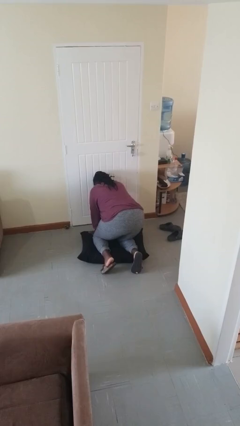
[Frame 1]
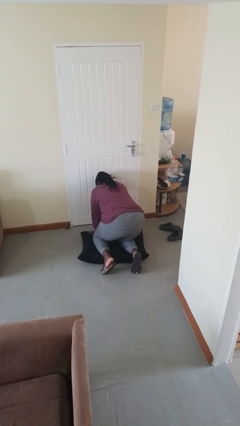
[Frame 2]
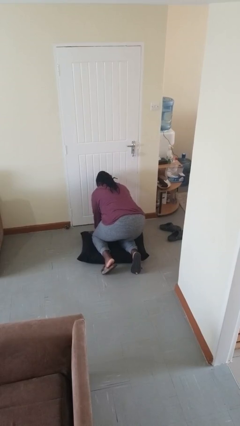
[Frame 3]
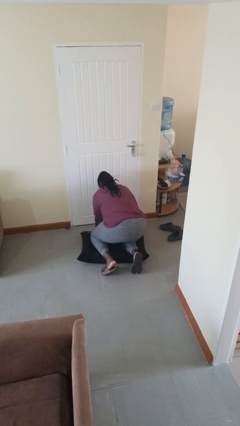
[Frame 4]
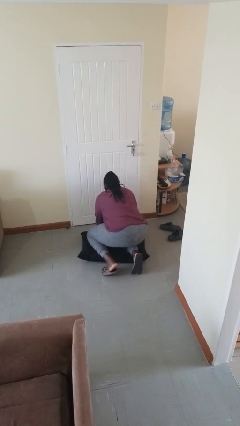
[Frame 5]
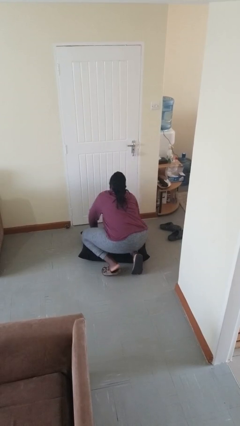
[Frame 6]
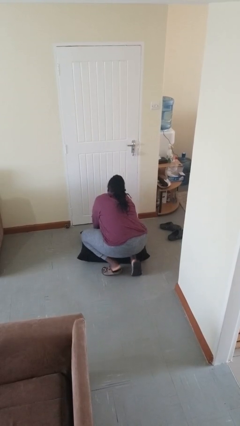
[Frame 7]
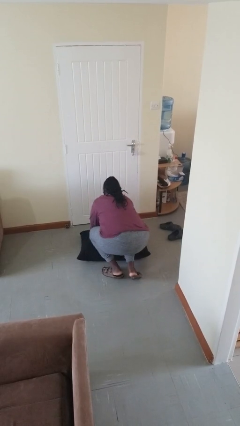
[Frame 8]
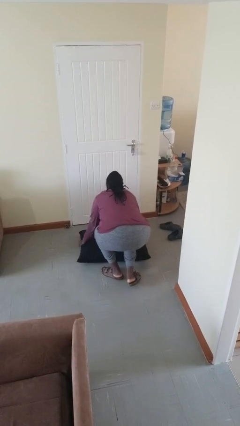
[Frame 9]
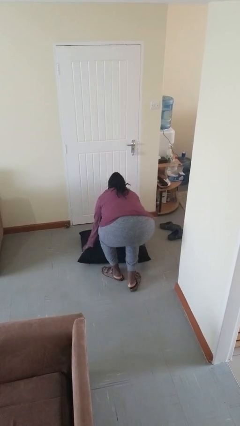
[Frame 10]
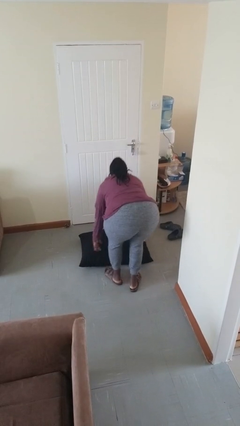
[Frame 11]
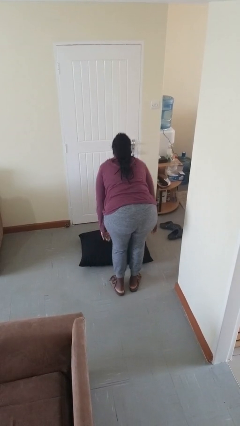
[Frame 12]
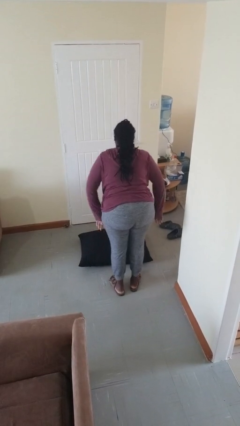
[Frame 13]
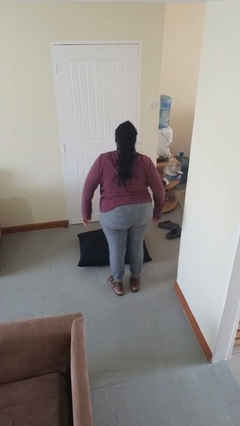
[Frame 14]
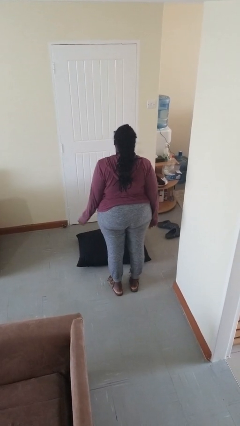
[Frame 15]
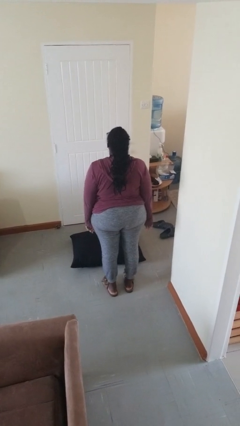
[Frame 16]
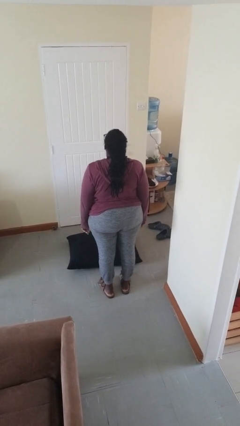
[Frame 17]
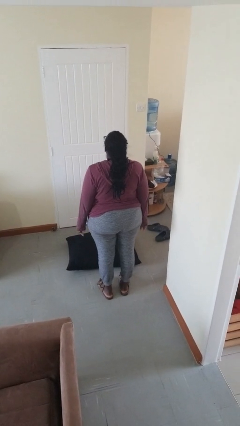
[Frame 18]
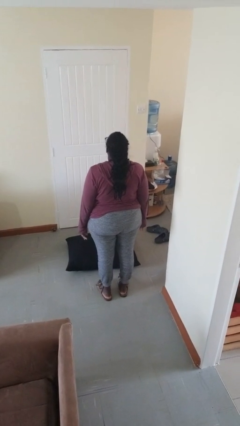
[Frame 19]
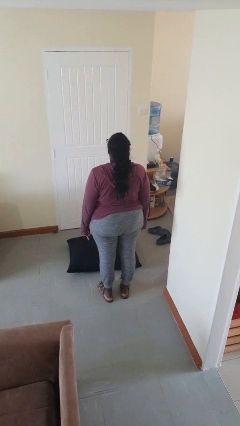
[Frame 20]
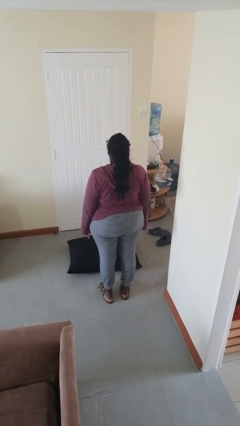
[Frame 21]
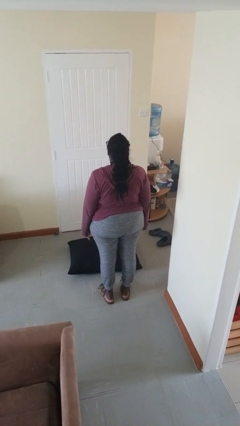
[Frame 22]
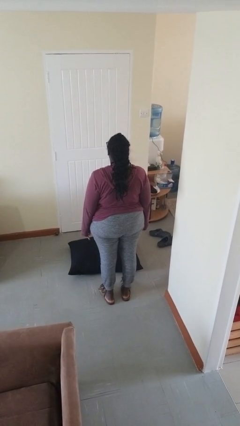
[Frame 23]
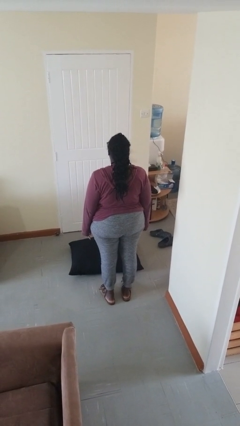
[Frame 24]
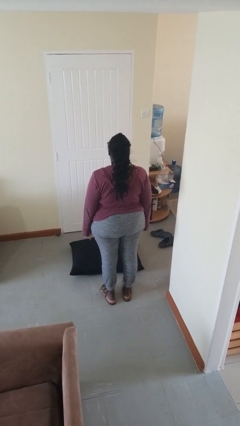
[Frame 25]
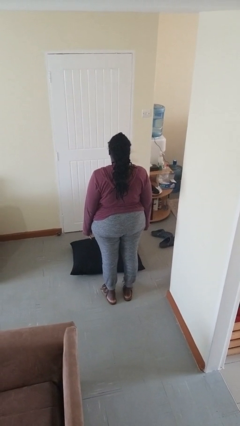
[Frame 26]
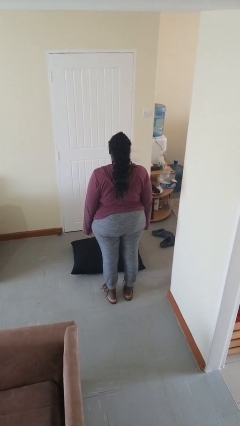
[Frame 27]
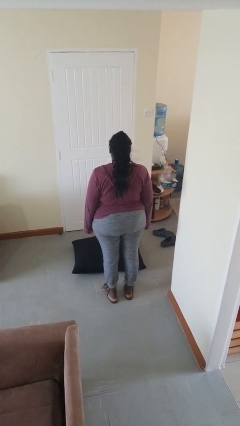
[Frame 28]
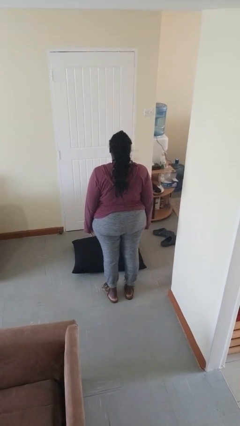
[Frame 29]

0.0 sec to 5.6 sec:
person stands up from floor

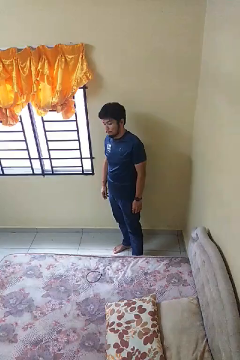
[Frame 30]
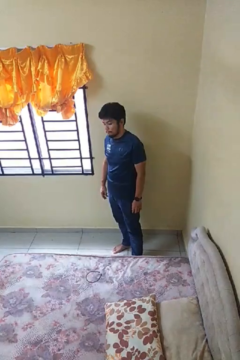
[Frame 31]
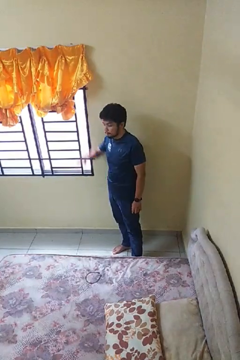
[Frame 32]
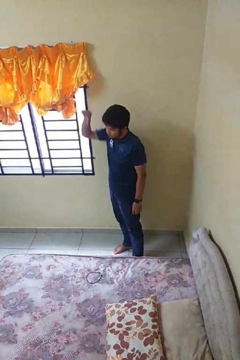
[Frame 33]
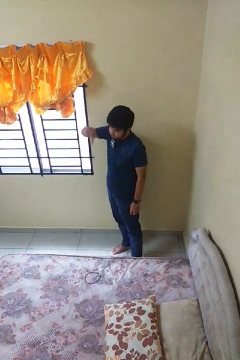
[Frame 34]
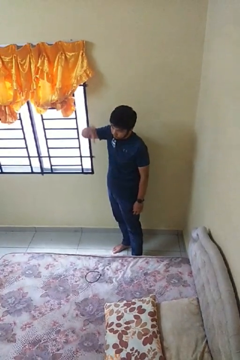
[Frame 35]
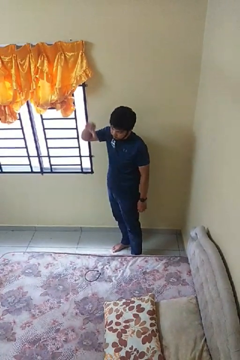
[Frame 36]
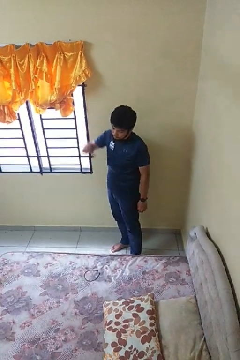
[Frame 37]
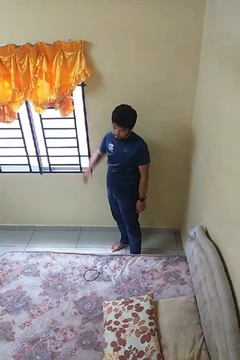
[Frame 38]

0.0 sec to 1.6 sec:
person gestures thumbs down

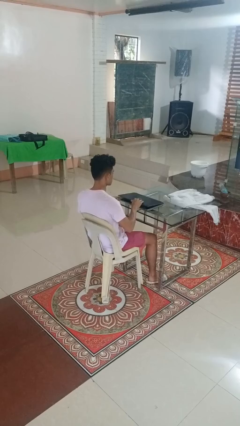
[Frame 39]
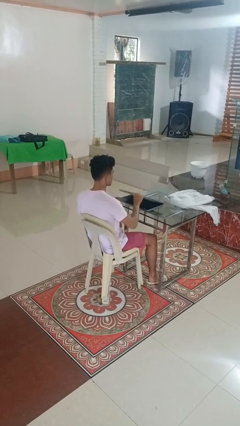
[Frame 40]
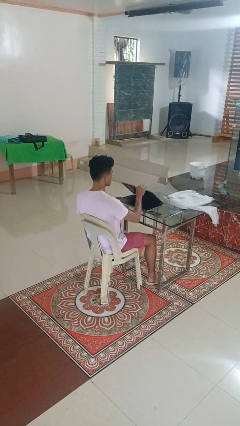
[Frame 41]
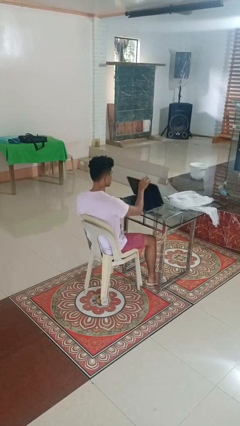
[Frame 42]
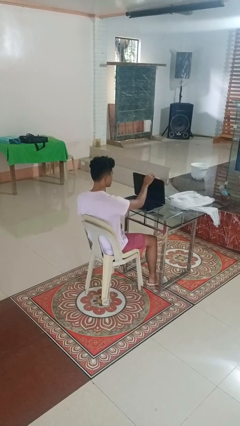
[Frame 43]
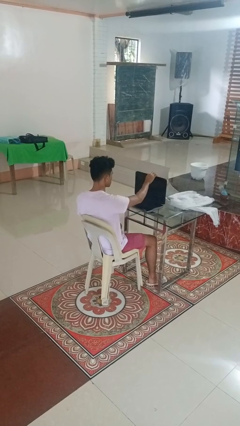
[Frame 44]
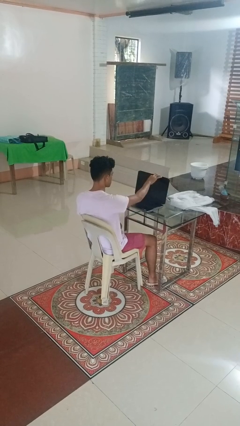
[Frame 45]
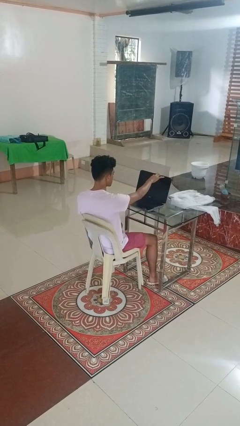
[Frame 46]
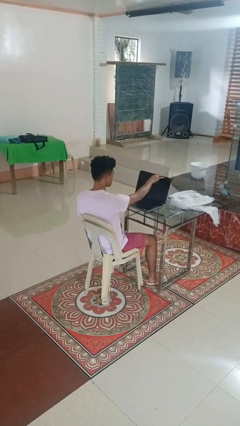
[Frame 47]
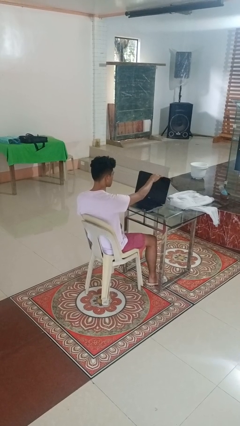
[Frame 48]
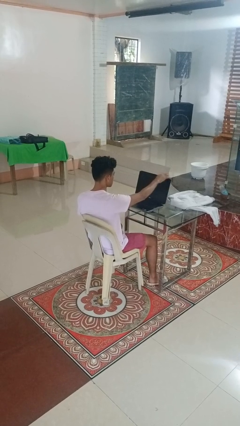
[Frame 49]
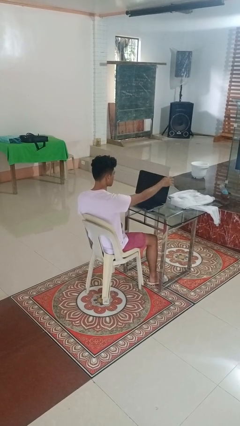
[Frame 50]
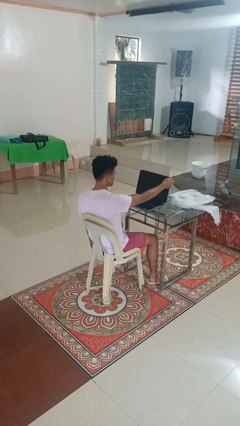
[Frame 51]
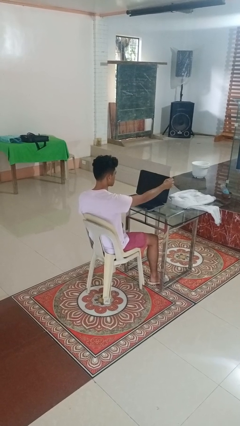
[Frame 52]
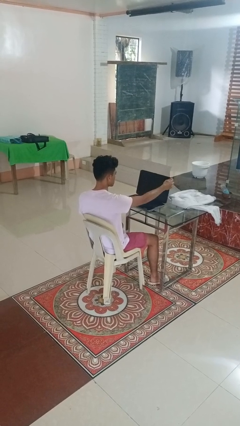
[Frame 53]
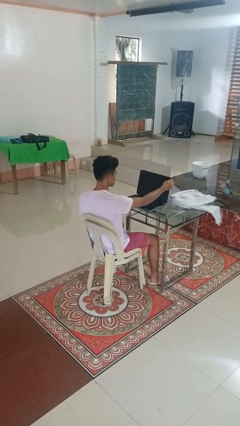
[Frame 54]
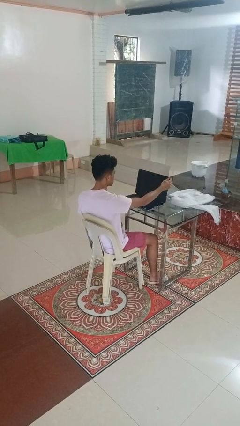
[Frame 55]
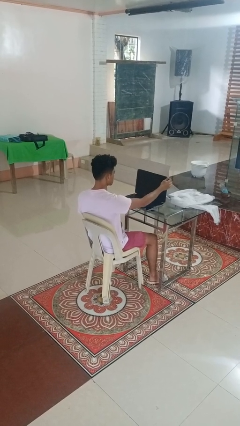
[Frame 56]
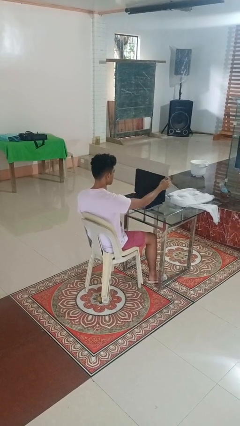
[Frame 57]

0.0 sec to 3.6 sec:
person opens laptop

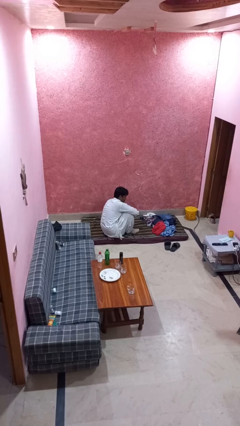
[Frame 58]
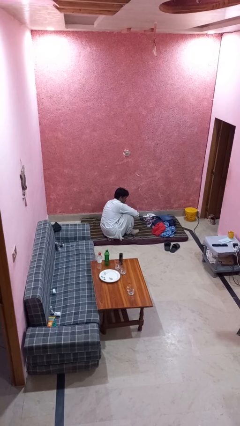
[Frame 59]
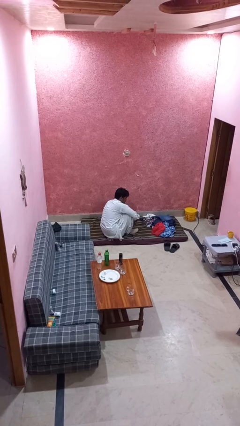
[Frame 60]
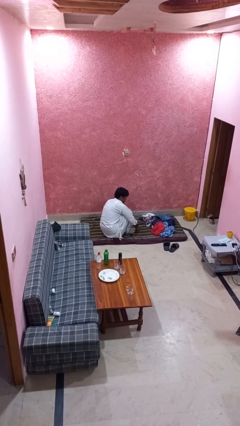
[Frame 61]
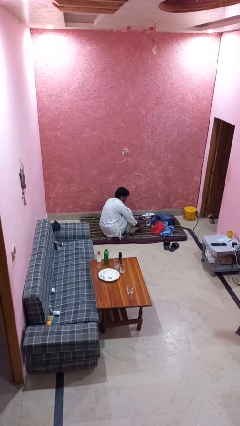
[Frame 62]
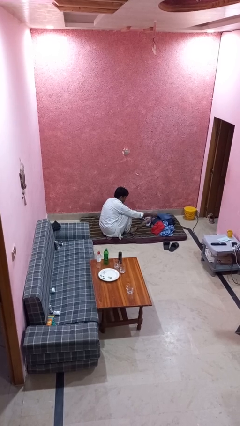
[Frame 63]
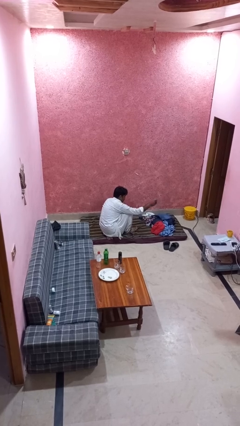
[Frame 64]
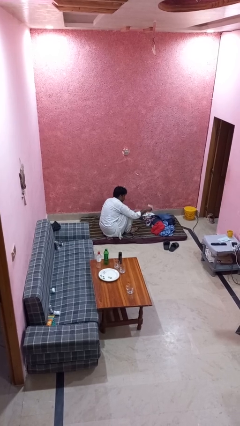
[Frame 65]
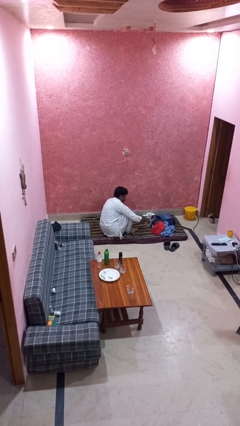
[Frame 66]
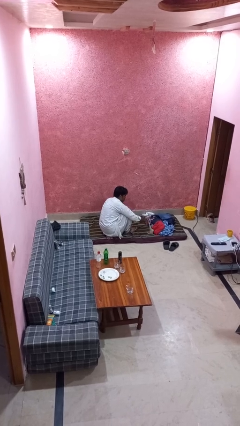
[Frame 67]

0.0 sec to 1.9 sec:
person takes off socks

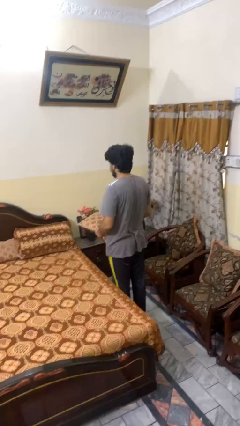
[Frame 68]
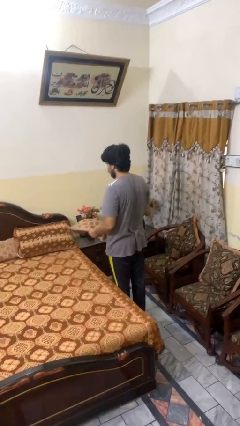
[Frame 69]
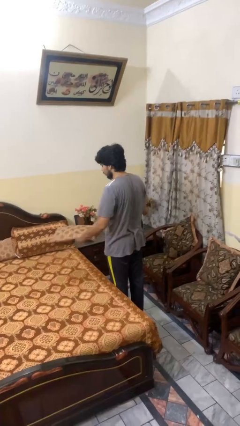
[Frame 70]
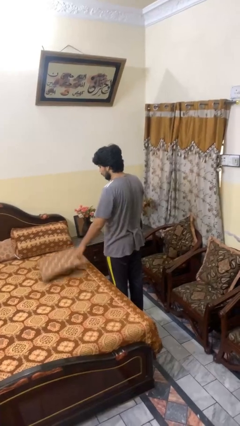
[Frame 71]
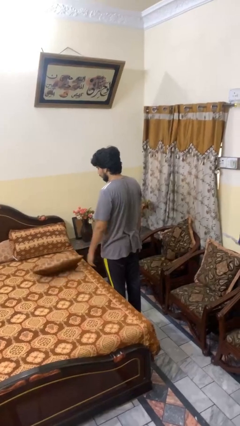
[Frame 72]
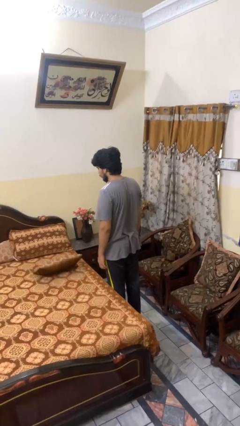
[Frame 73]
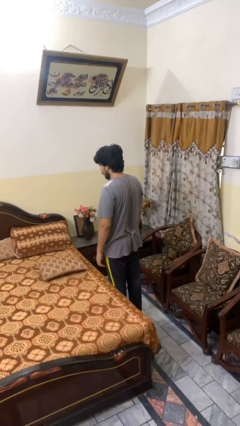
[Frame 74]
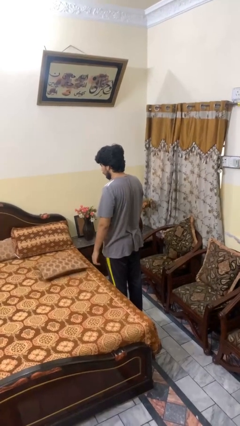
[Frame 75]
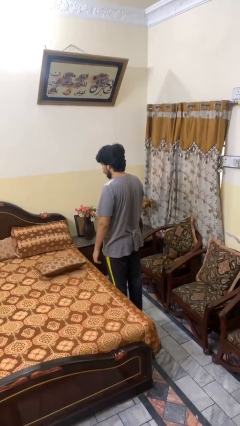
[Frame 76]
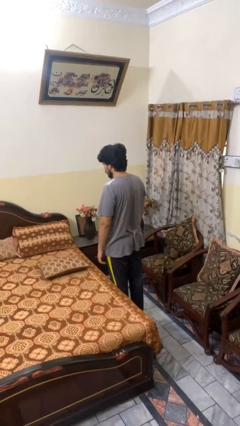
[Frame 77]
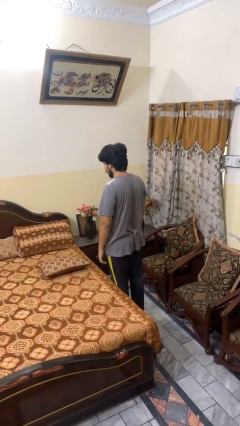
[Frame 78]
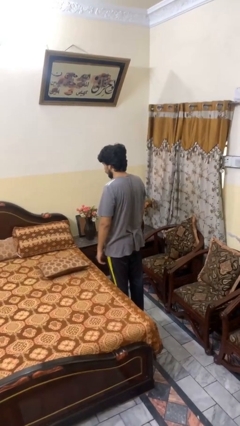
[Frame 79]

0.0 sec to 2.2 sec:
person puts down object on bed

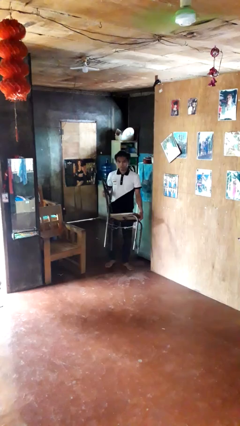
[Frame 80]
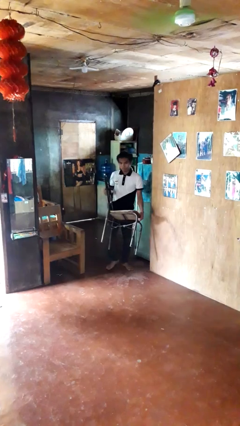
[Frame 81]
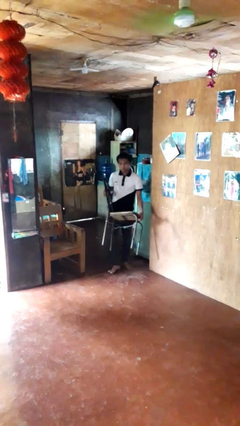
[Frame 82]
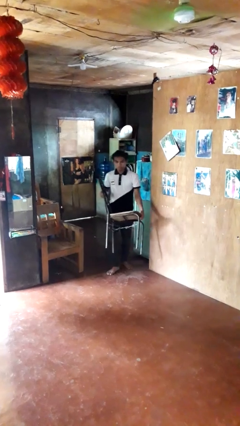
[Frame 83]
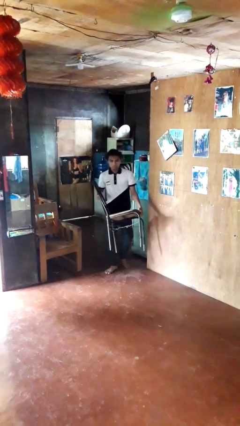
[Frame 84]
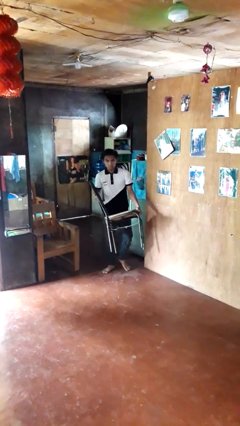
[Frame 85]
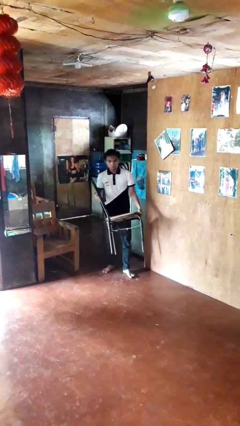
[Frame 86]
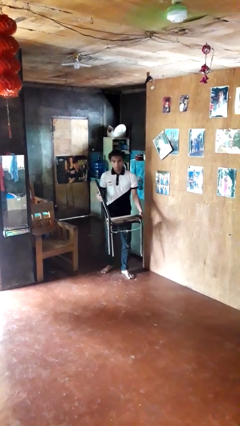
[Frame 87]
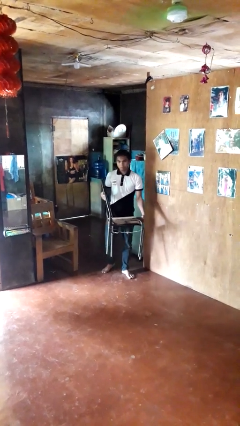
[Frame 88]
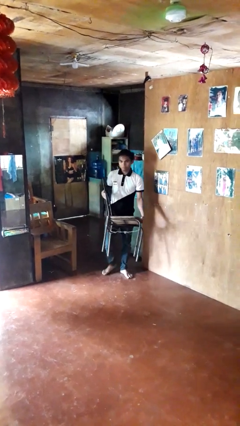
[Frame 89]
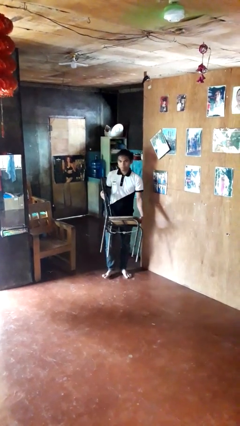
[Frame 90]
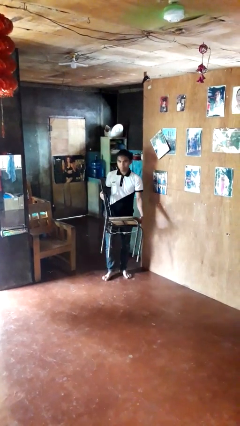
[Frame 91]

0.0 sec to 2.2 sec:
person carries furniture

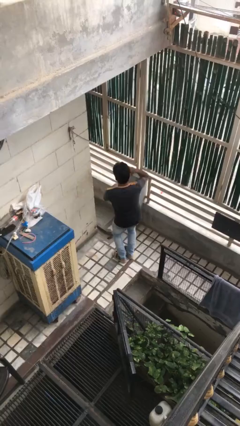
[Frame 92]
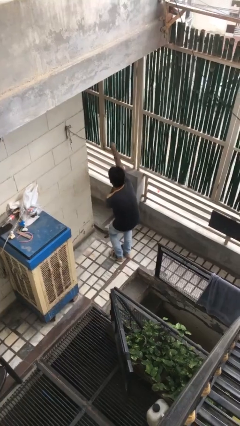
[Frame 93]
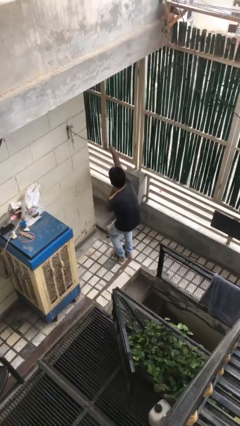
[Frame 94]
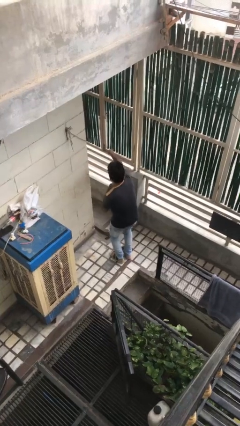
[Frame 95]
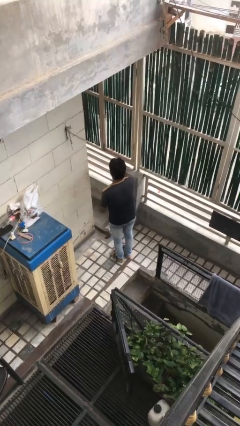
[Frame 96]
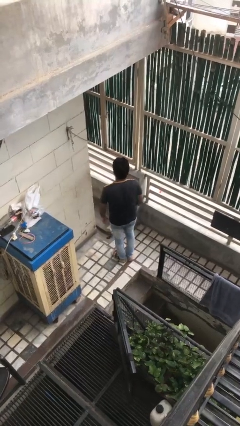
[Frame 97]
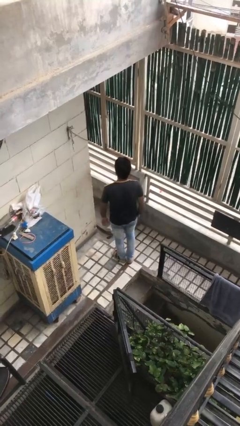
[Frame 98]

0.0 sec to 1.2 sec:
person karate chop
